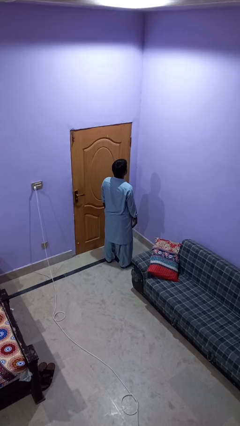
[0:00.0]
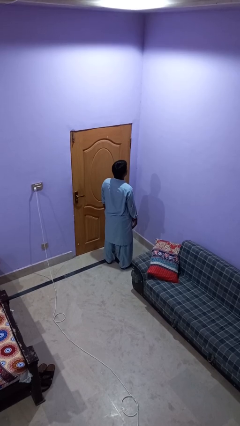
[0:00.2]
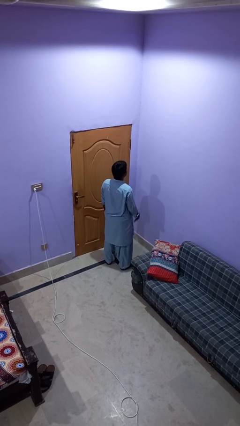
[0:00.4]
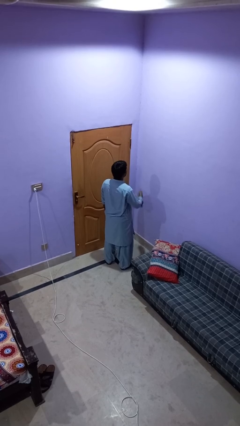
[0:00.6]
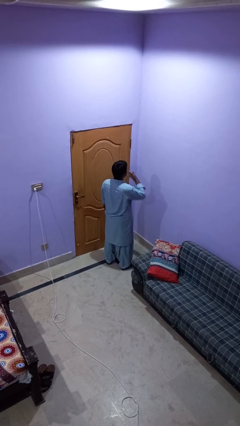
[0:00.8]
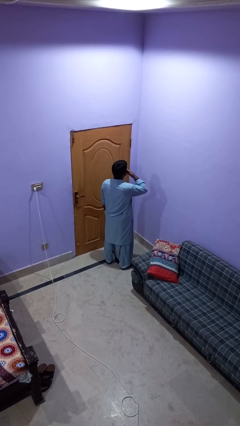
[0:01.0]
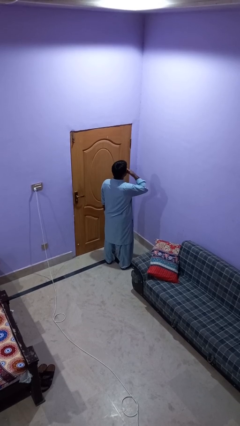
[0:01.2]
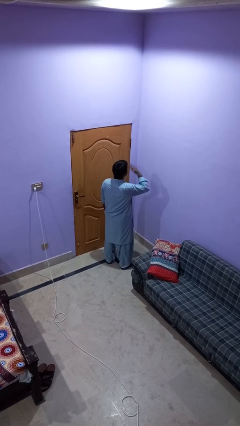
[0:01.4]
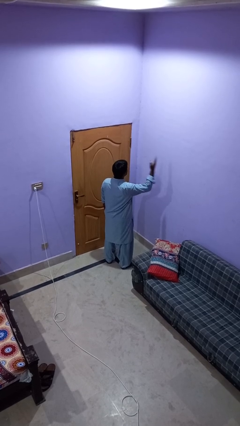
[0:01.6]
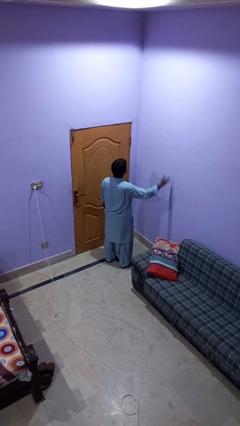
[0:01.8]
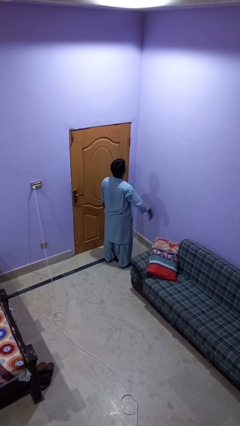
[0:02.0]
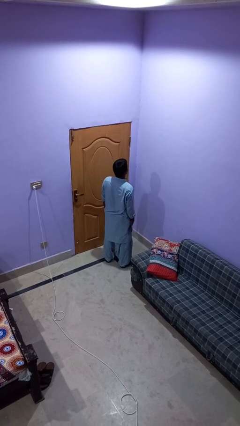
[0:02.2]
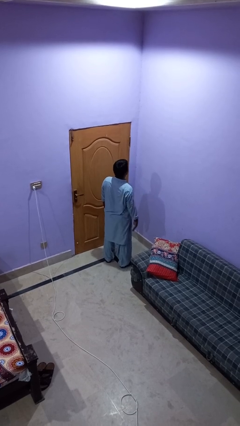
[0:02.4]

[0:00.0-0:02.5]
person gestures blow kiss

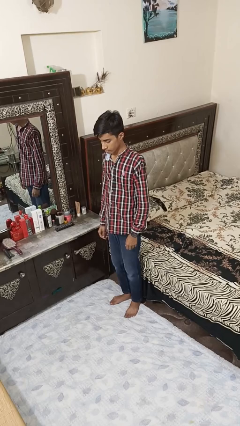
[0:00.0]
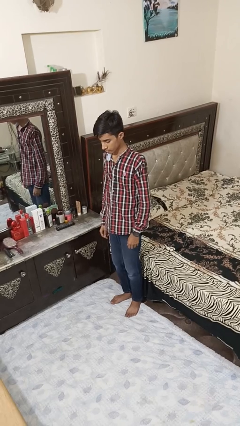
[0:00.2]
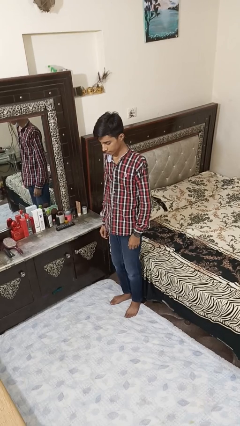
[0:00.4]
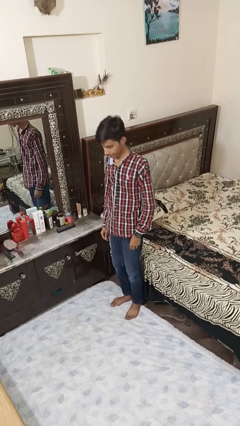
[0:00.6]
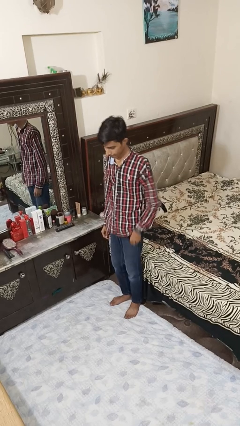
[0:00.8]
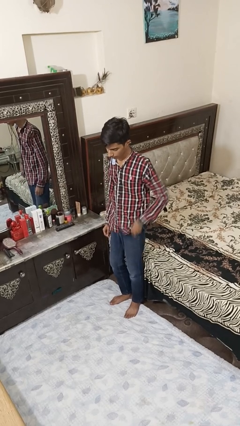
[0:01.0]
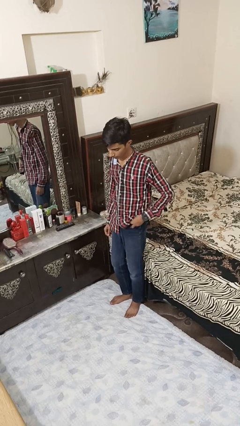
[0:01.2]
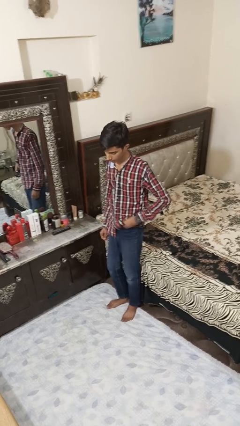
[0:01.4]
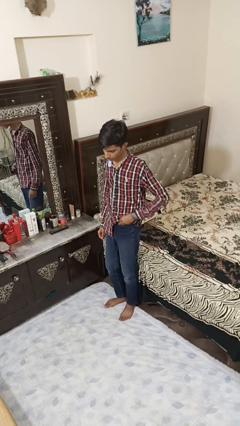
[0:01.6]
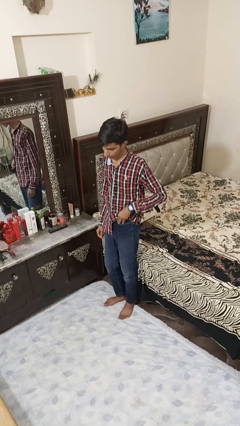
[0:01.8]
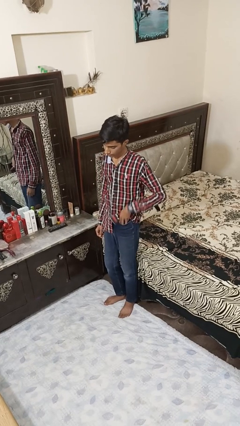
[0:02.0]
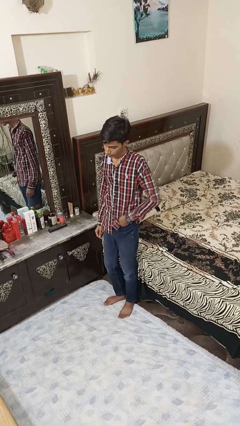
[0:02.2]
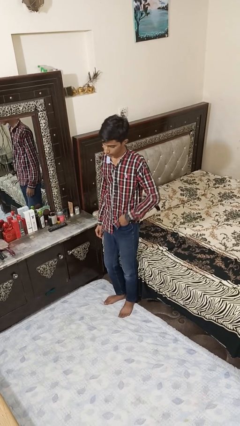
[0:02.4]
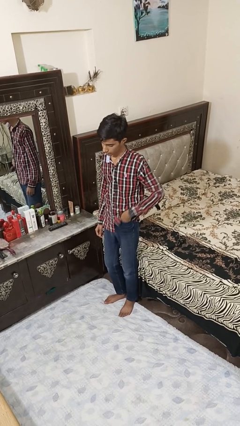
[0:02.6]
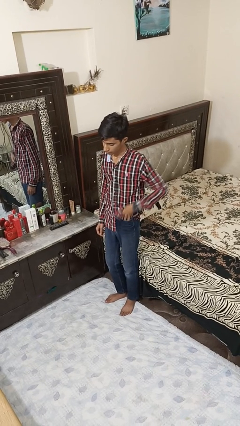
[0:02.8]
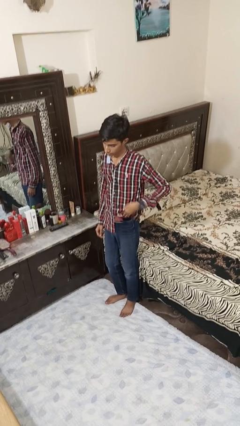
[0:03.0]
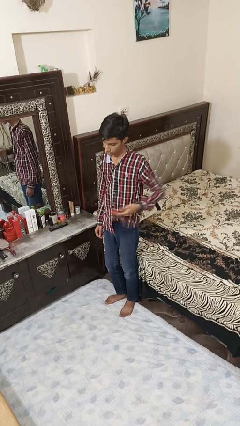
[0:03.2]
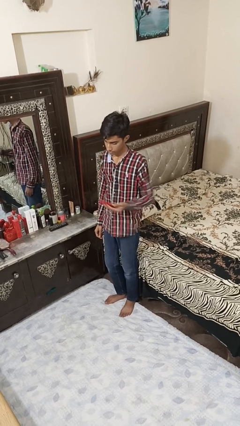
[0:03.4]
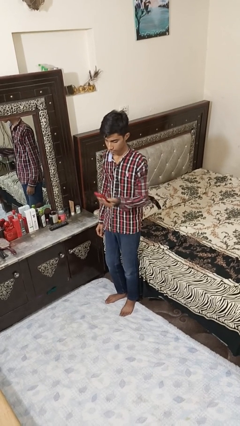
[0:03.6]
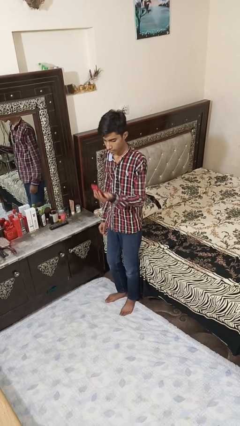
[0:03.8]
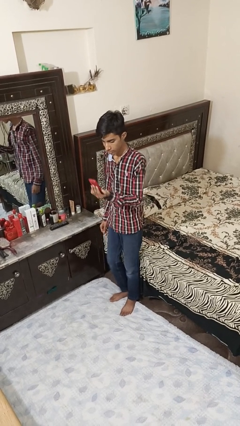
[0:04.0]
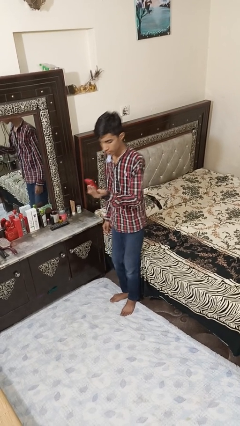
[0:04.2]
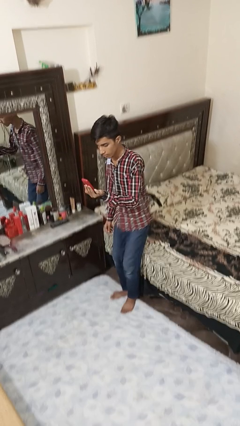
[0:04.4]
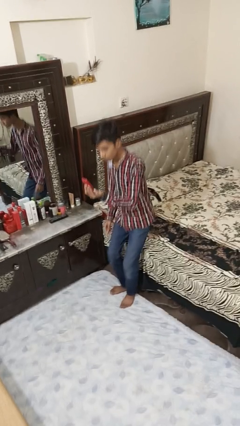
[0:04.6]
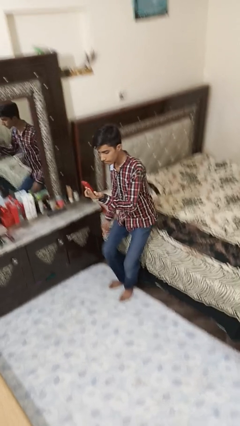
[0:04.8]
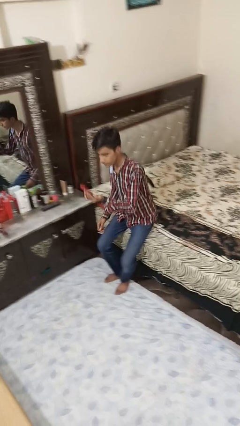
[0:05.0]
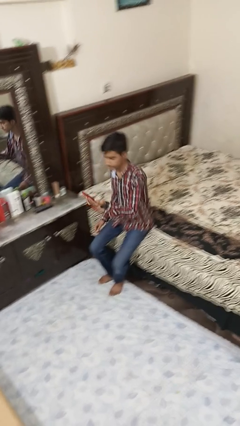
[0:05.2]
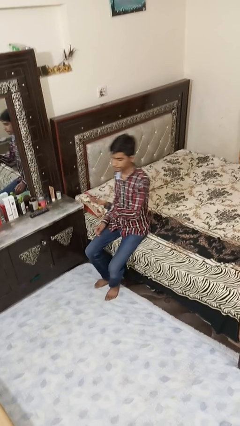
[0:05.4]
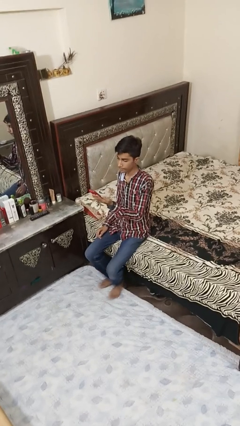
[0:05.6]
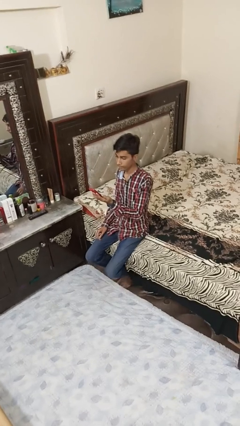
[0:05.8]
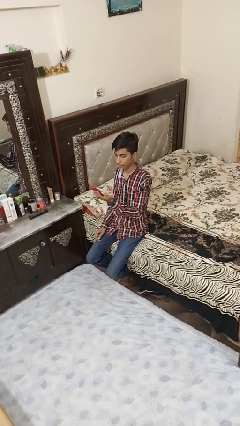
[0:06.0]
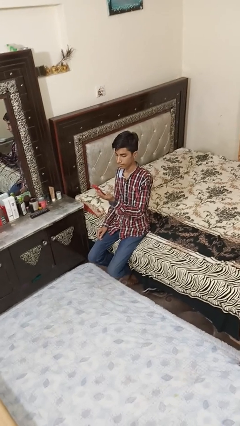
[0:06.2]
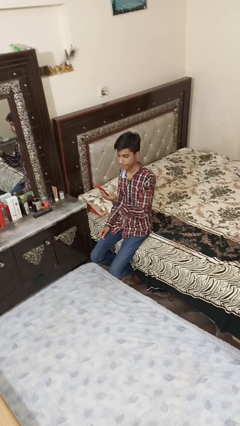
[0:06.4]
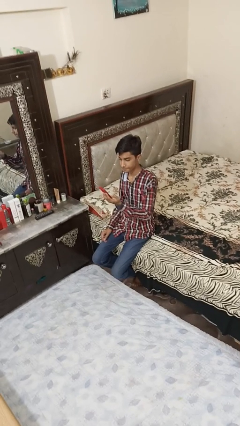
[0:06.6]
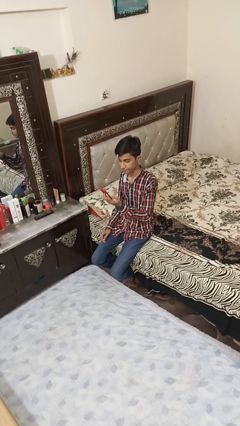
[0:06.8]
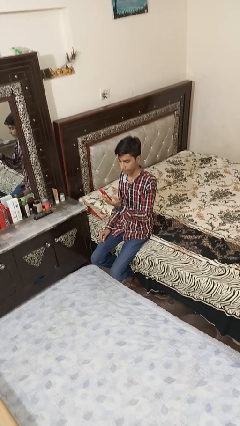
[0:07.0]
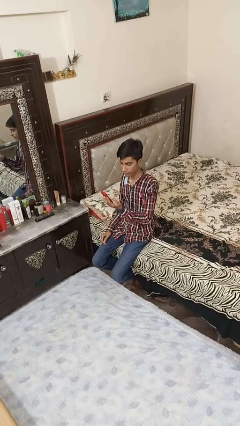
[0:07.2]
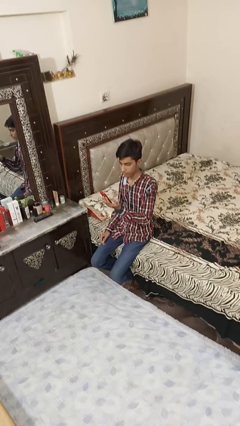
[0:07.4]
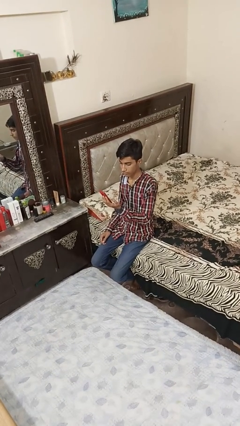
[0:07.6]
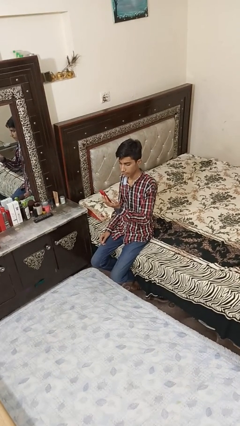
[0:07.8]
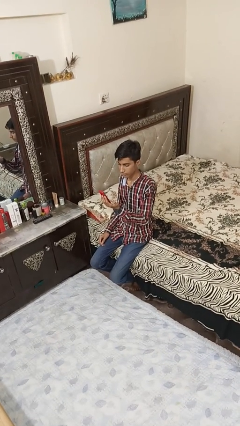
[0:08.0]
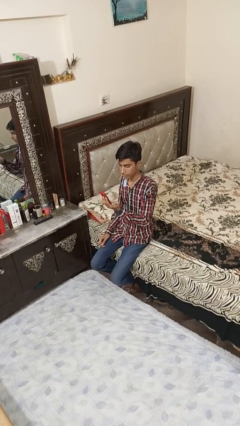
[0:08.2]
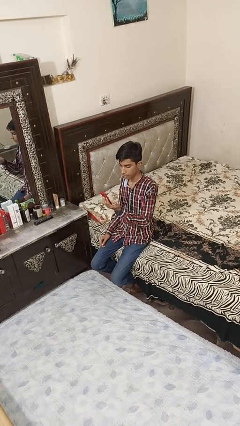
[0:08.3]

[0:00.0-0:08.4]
person takes phone from pocket

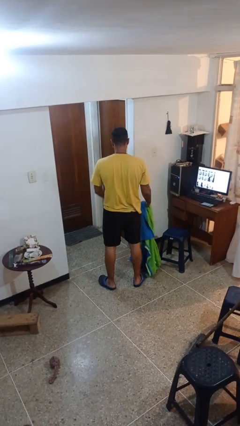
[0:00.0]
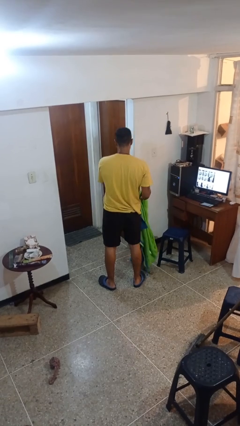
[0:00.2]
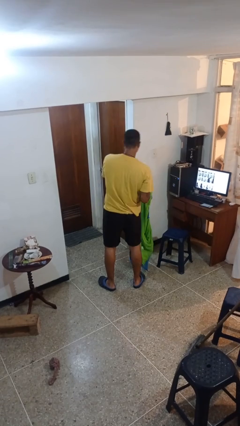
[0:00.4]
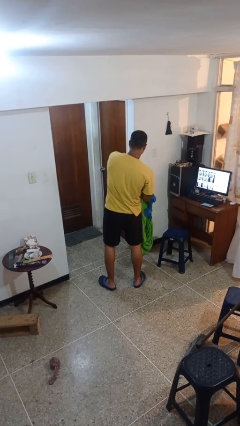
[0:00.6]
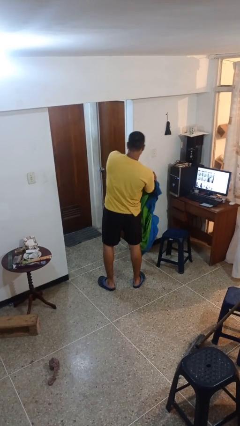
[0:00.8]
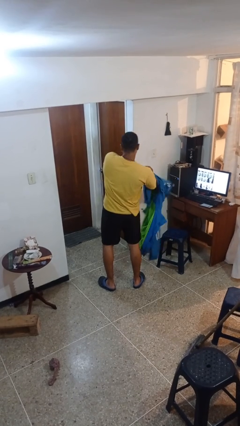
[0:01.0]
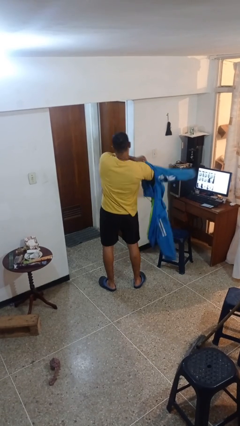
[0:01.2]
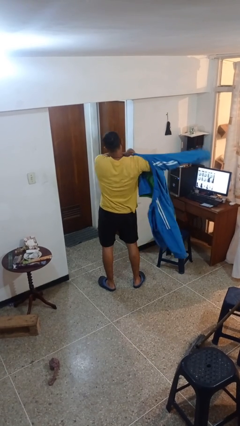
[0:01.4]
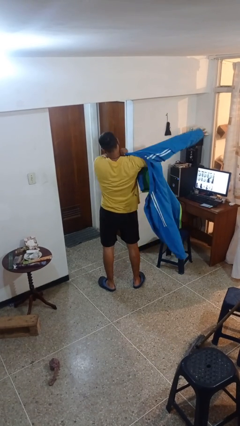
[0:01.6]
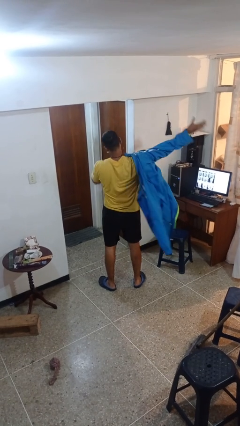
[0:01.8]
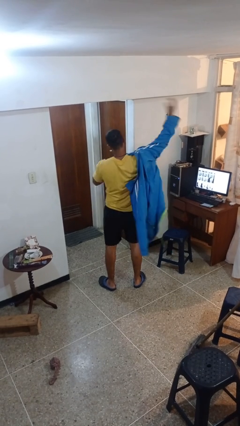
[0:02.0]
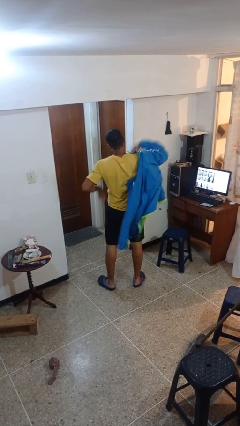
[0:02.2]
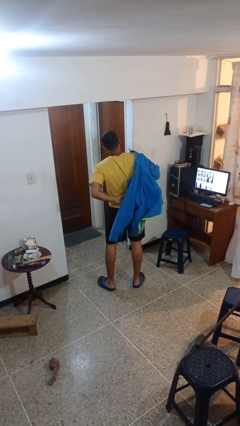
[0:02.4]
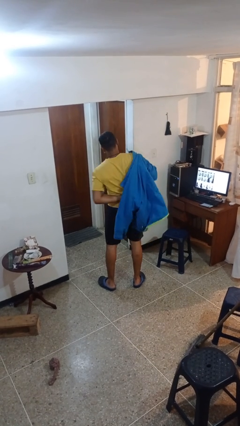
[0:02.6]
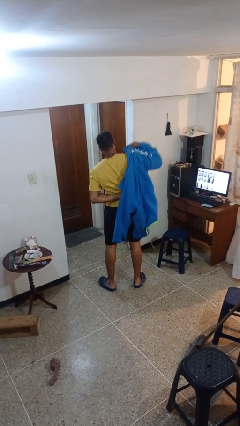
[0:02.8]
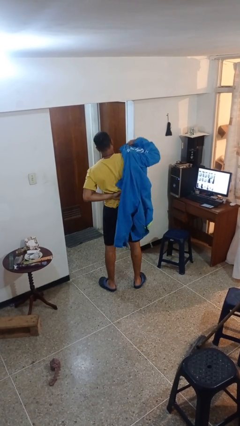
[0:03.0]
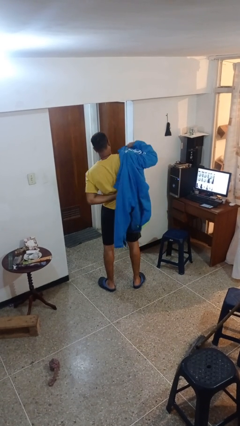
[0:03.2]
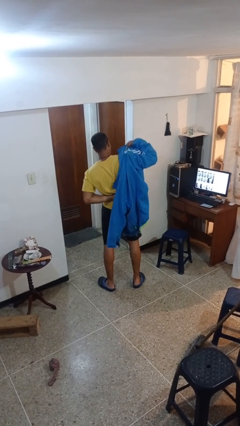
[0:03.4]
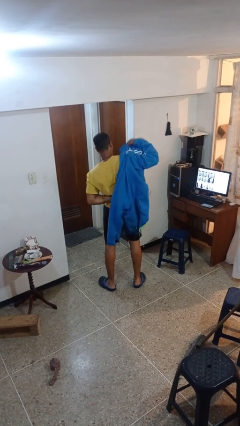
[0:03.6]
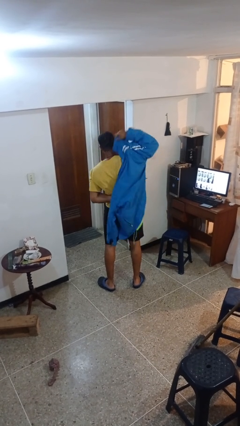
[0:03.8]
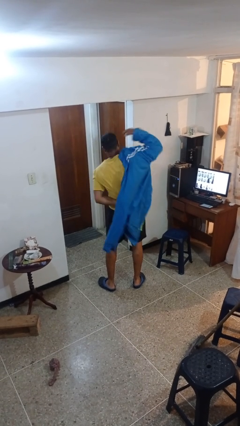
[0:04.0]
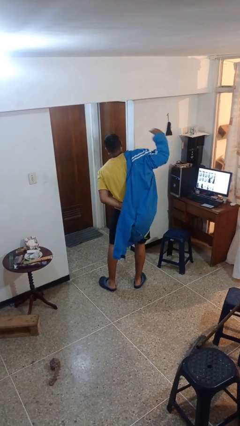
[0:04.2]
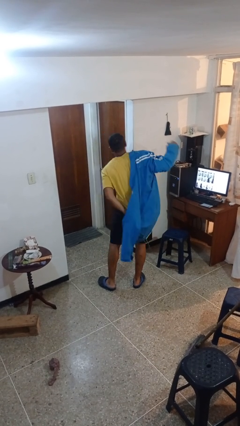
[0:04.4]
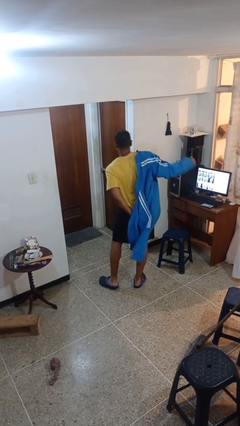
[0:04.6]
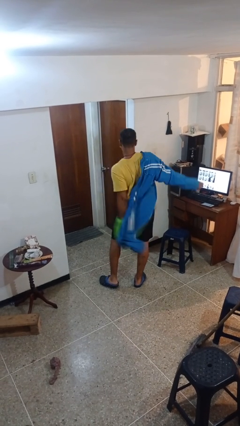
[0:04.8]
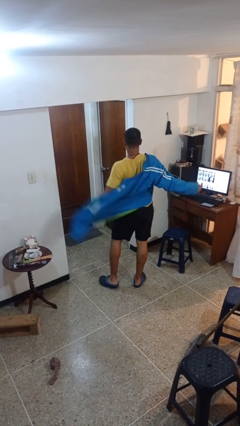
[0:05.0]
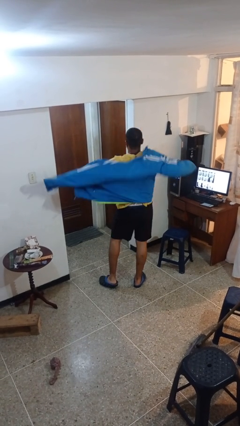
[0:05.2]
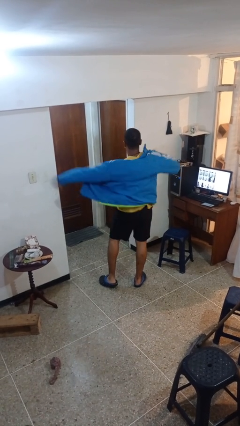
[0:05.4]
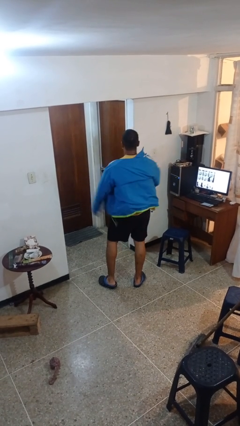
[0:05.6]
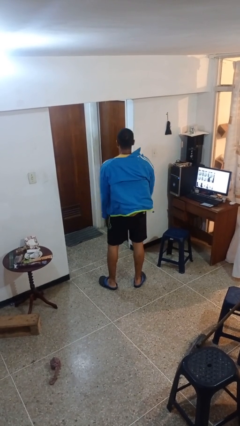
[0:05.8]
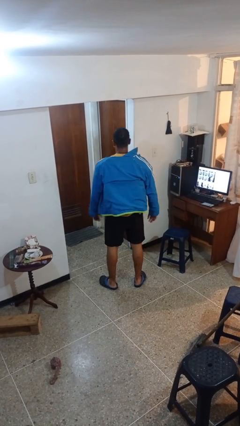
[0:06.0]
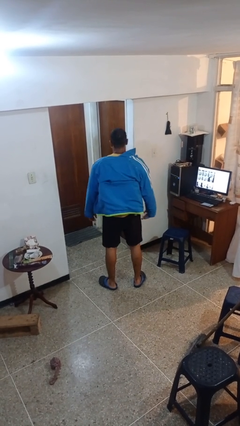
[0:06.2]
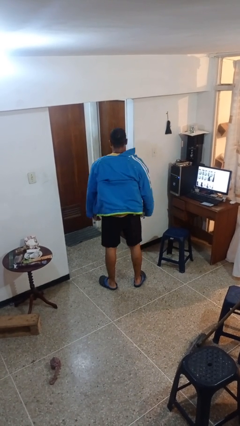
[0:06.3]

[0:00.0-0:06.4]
person puts on jacket

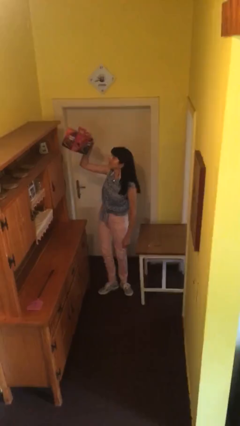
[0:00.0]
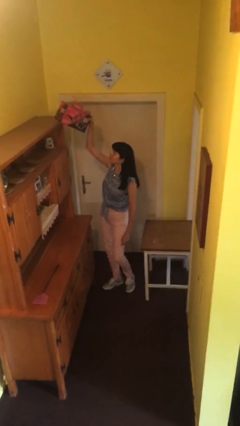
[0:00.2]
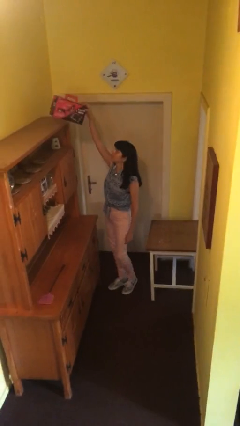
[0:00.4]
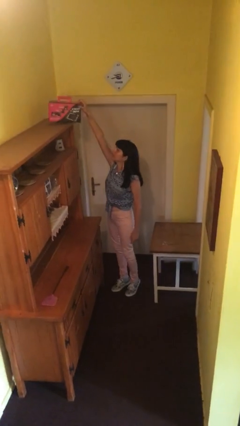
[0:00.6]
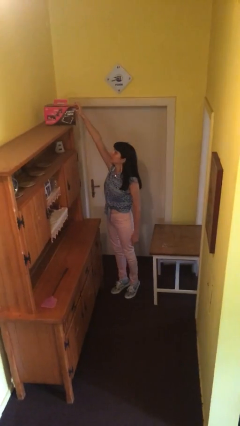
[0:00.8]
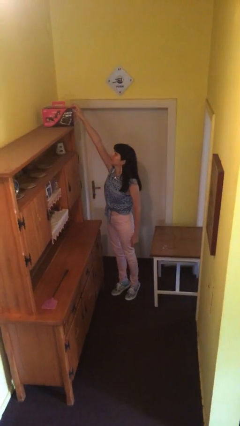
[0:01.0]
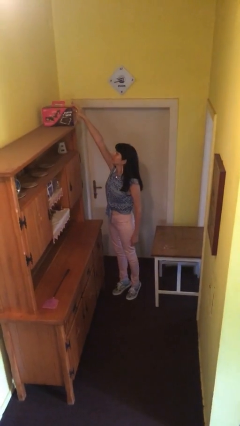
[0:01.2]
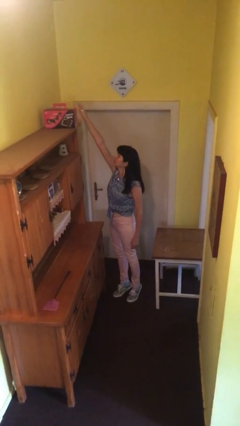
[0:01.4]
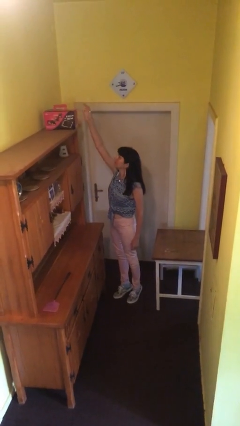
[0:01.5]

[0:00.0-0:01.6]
person puts down object on shelf
